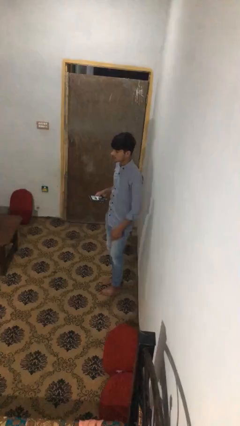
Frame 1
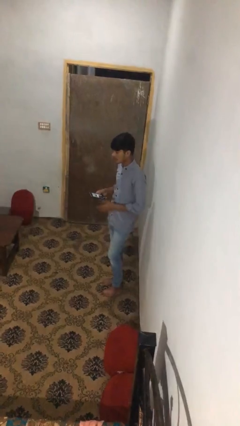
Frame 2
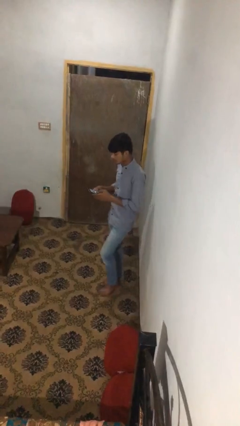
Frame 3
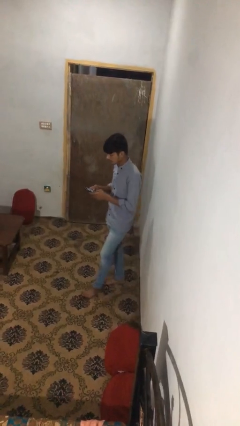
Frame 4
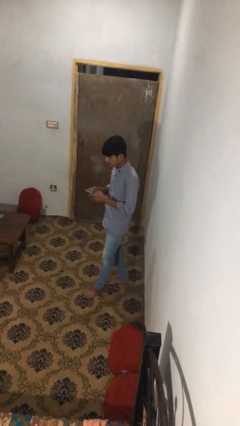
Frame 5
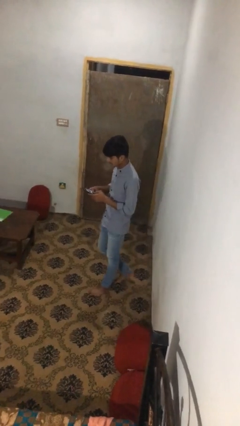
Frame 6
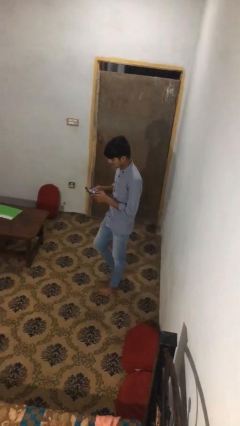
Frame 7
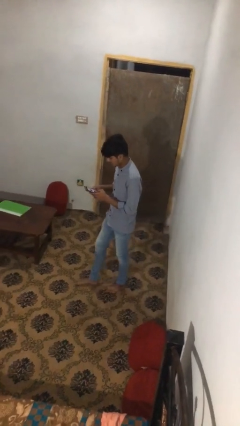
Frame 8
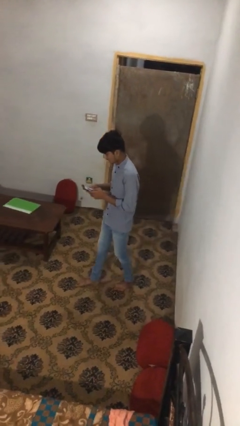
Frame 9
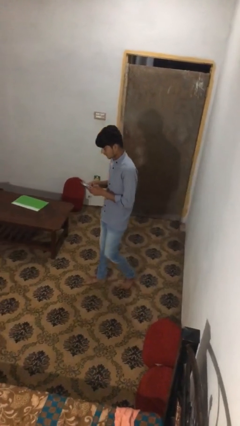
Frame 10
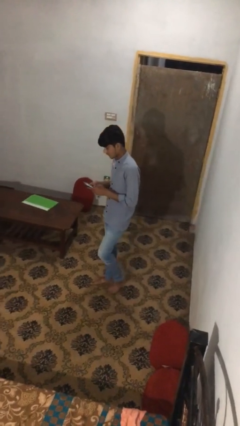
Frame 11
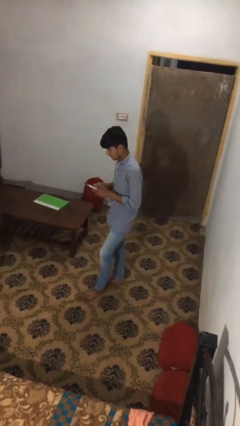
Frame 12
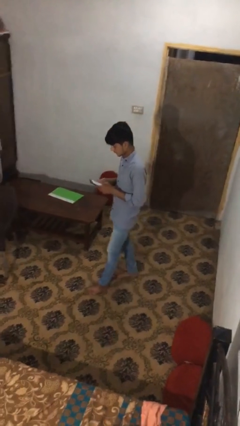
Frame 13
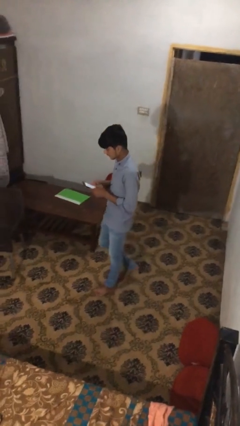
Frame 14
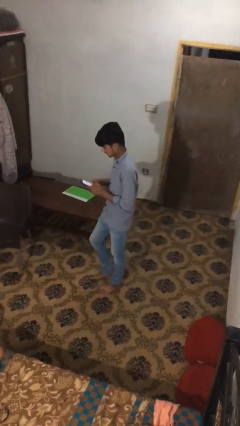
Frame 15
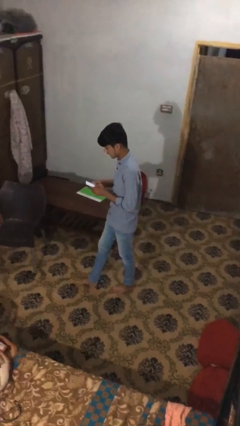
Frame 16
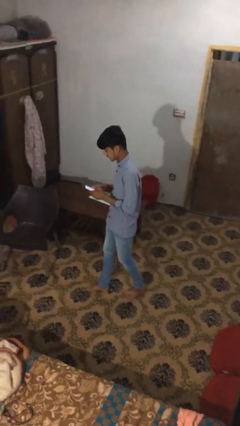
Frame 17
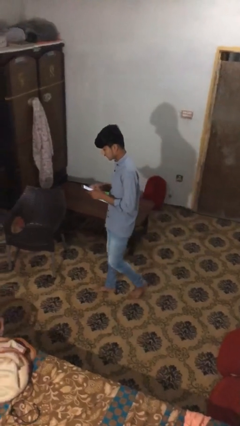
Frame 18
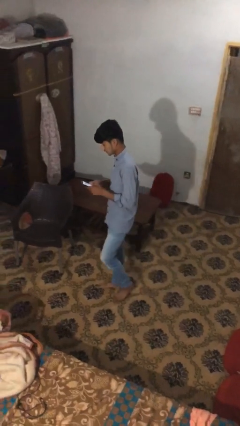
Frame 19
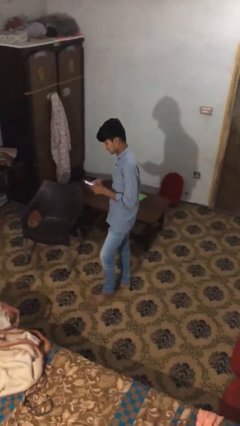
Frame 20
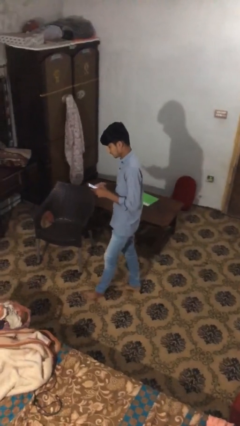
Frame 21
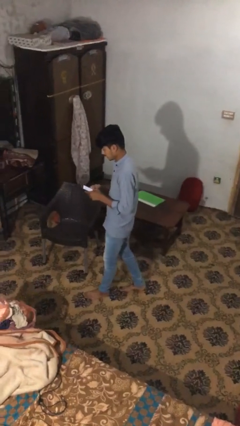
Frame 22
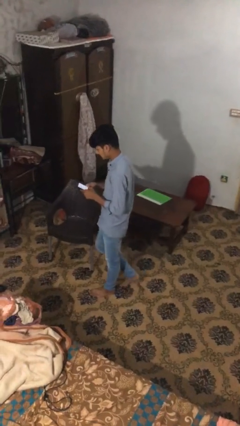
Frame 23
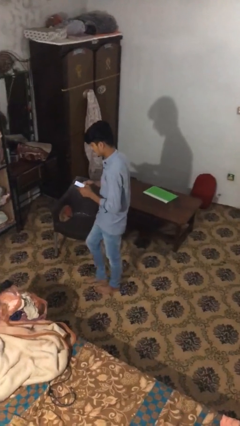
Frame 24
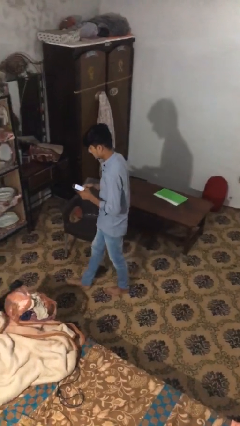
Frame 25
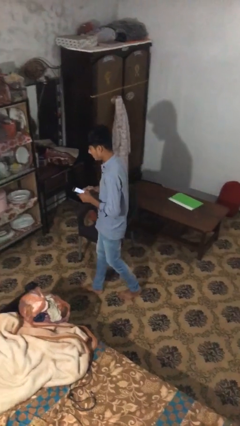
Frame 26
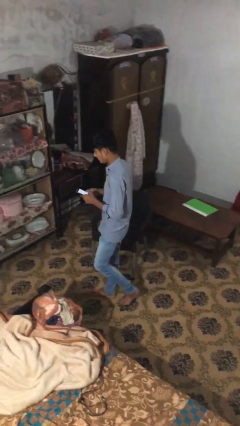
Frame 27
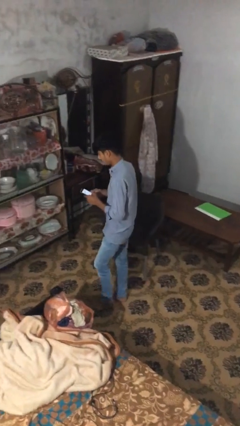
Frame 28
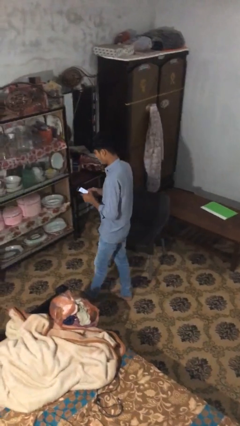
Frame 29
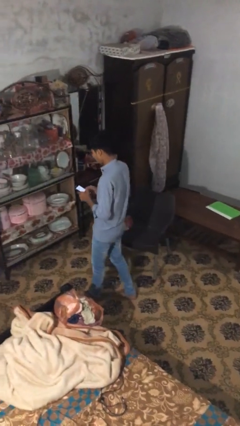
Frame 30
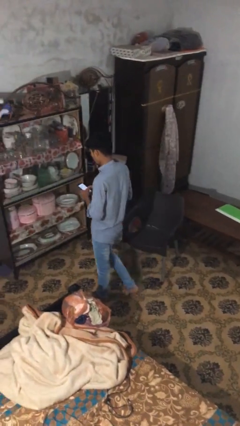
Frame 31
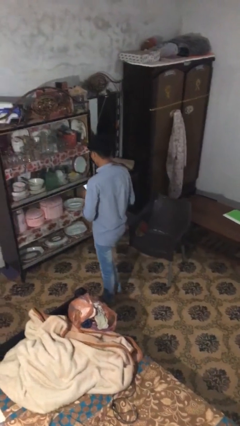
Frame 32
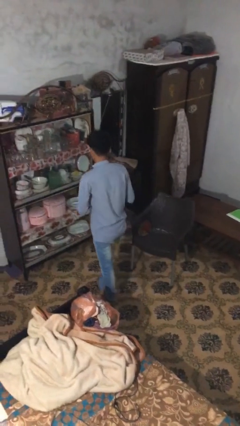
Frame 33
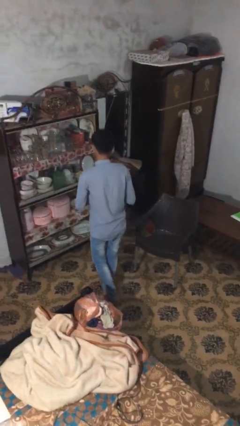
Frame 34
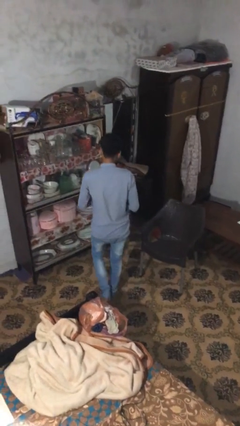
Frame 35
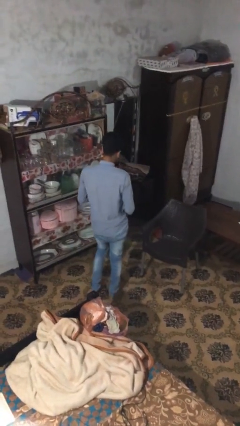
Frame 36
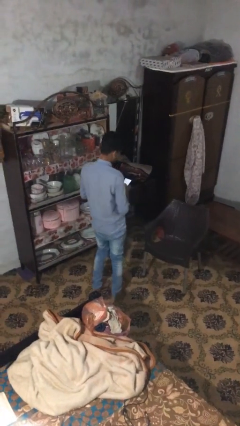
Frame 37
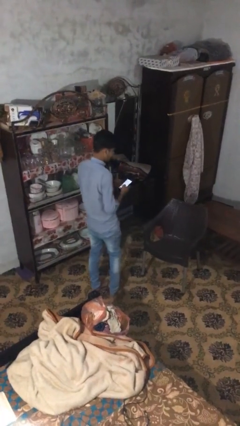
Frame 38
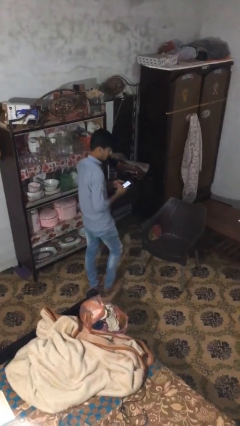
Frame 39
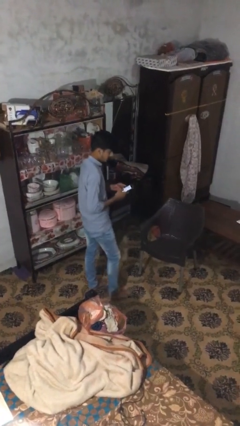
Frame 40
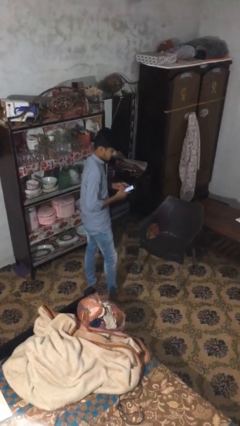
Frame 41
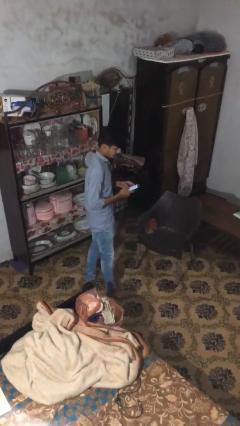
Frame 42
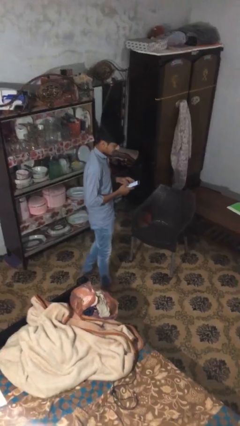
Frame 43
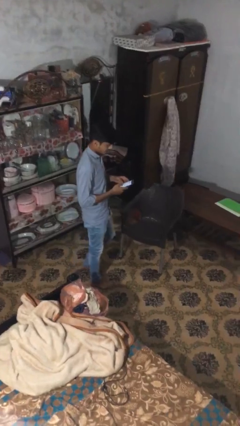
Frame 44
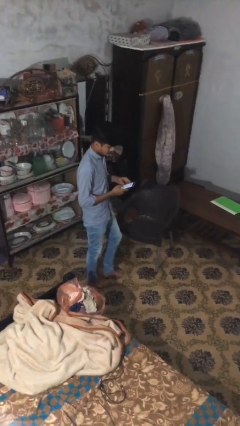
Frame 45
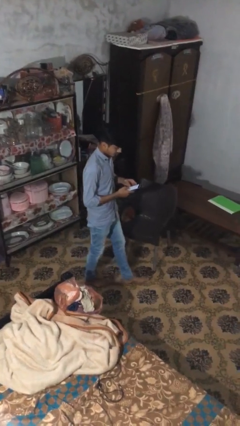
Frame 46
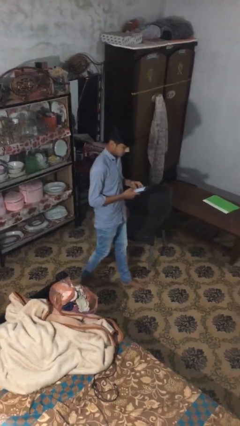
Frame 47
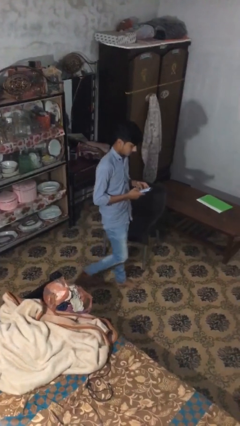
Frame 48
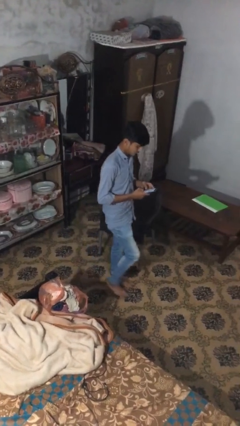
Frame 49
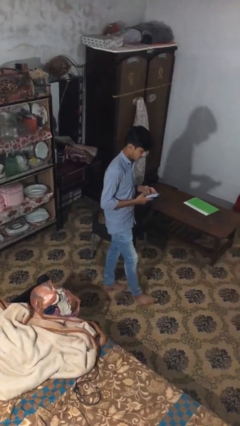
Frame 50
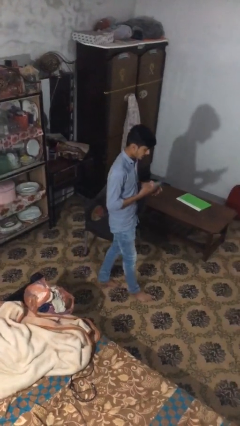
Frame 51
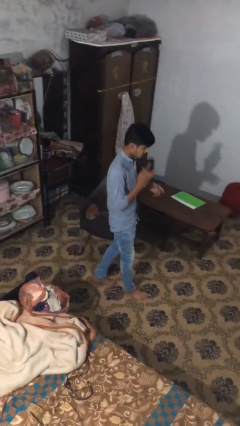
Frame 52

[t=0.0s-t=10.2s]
person texts on phone

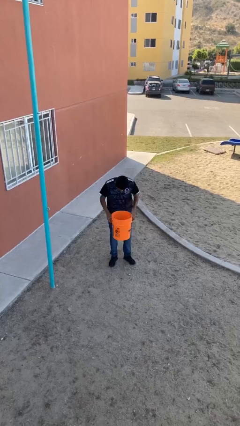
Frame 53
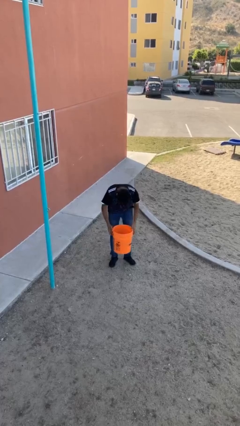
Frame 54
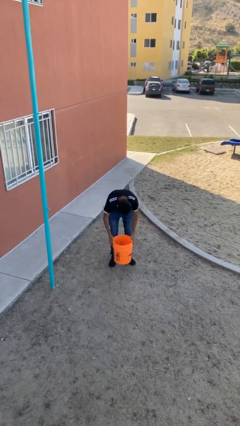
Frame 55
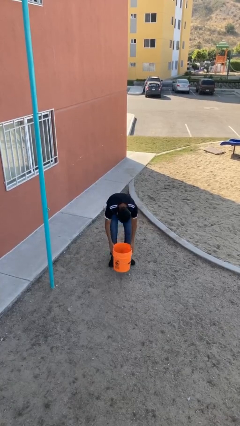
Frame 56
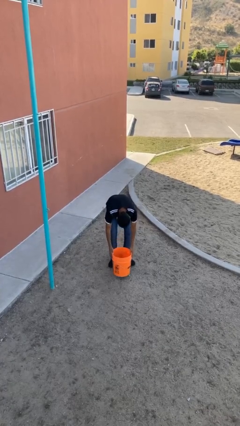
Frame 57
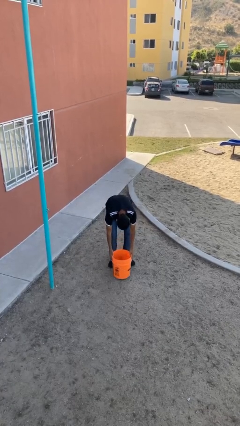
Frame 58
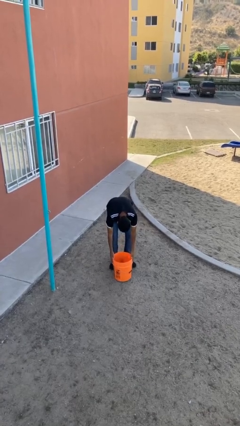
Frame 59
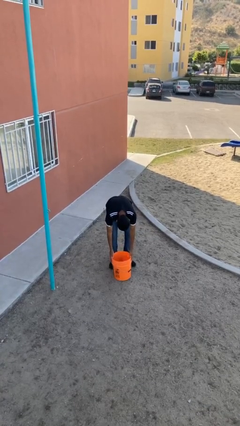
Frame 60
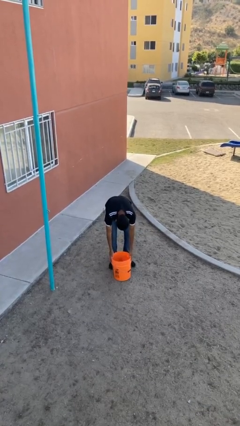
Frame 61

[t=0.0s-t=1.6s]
person puts down object on floor

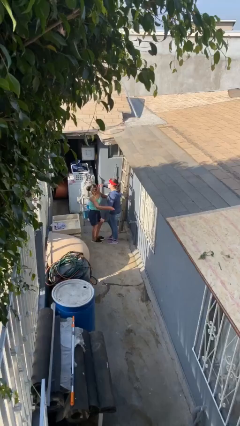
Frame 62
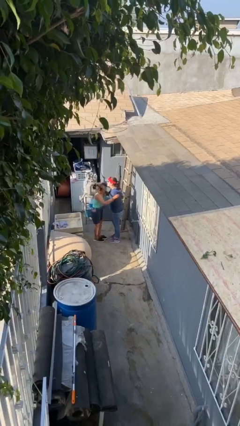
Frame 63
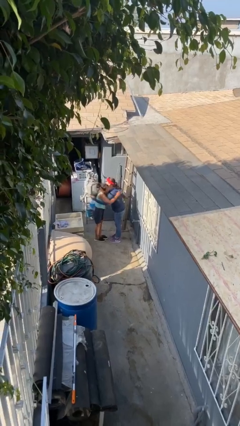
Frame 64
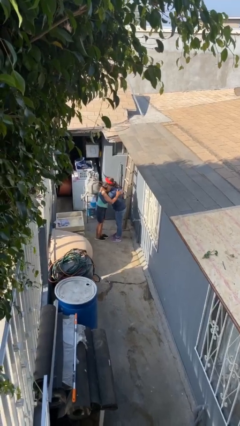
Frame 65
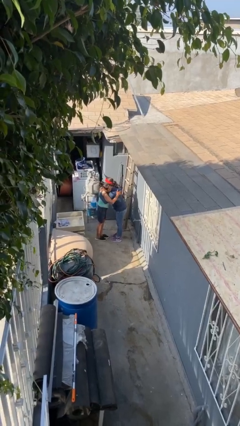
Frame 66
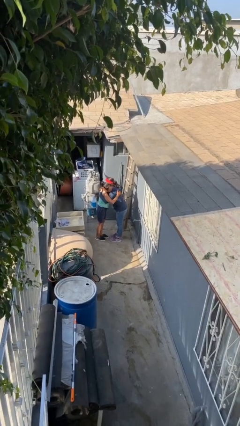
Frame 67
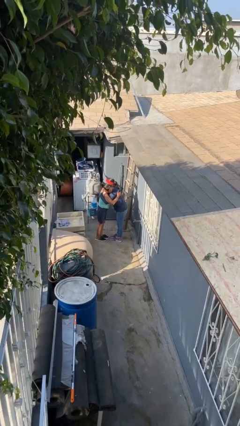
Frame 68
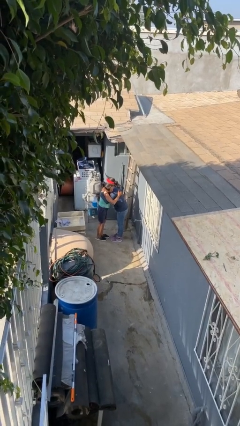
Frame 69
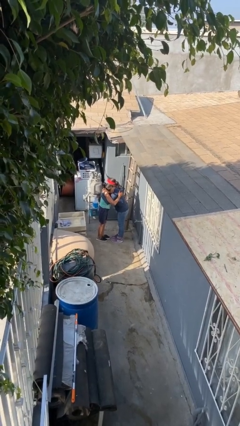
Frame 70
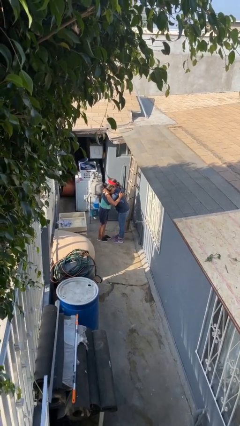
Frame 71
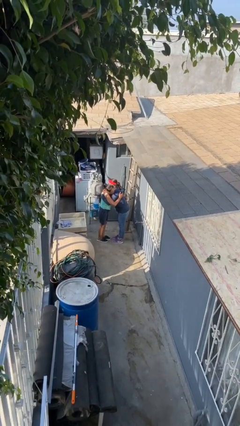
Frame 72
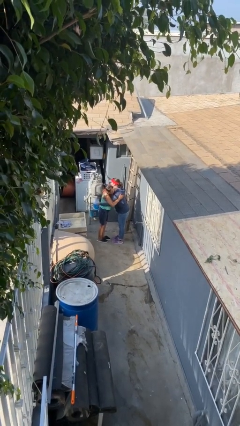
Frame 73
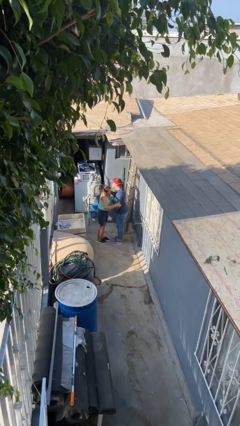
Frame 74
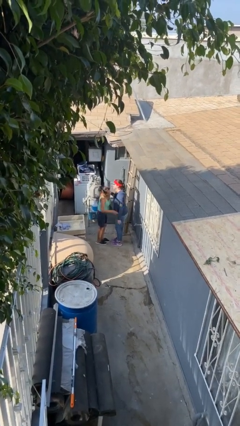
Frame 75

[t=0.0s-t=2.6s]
person embraces person

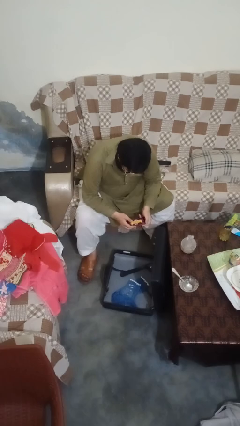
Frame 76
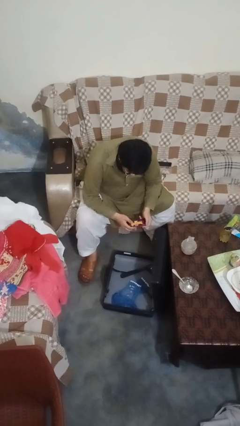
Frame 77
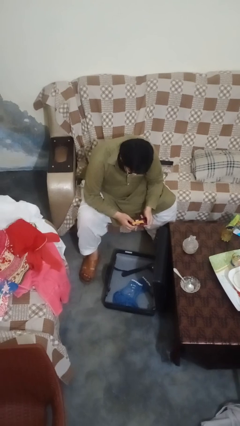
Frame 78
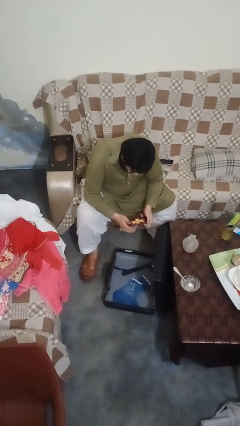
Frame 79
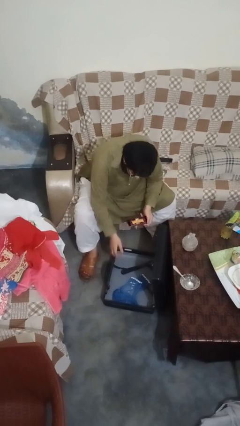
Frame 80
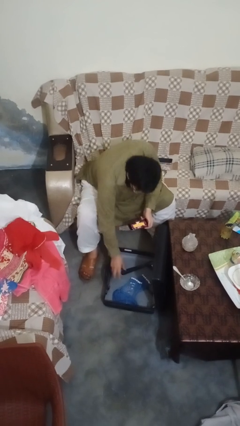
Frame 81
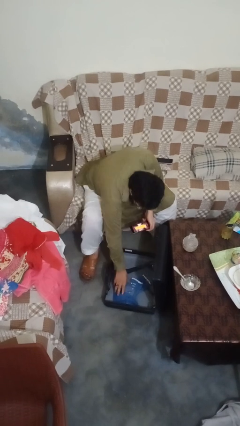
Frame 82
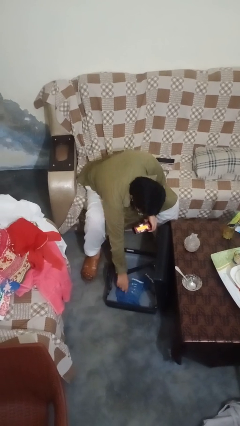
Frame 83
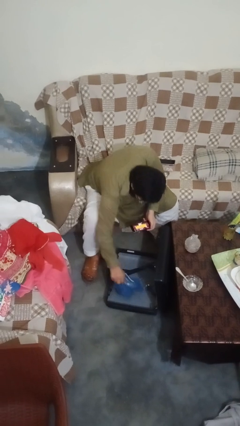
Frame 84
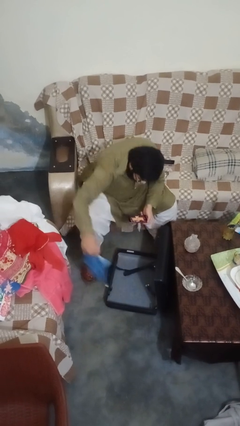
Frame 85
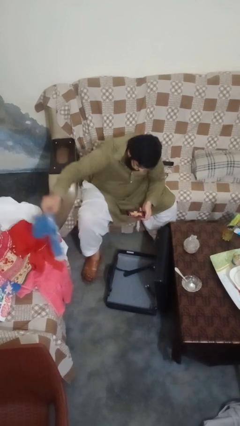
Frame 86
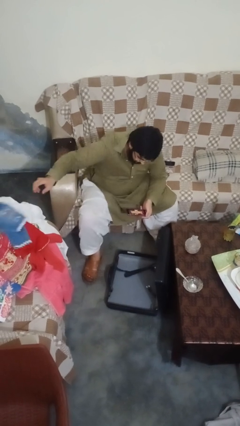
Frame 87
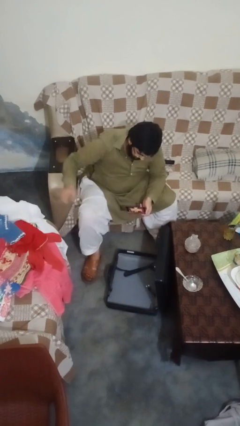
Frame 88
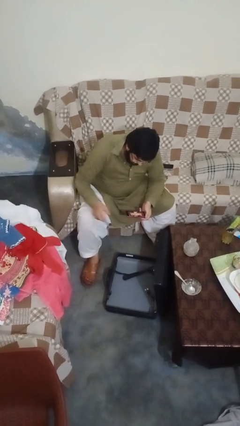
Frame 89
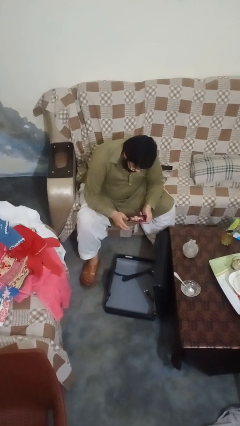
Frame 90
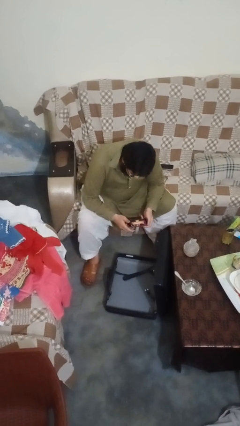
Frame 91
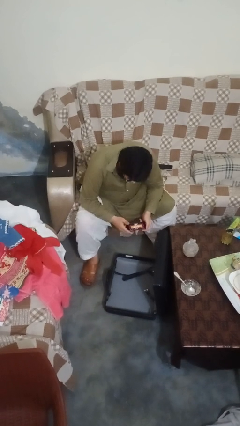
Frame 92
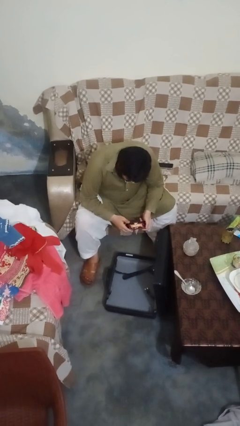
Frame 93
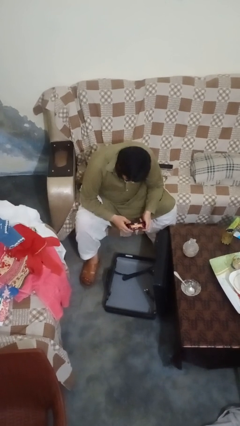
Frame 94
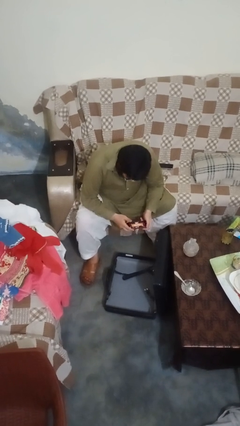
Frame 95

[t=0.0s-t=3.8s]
person unloads clothes from suitcase
